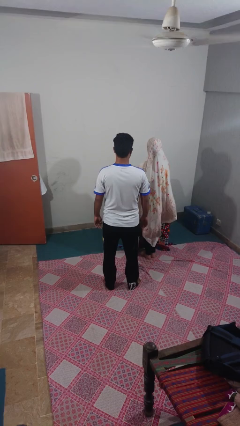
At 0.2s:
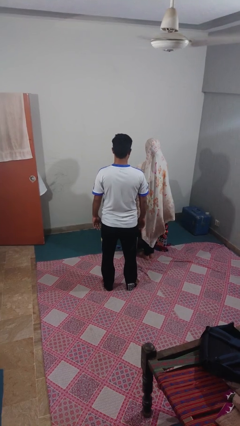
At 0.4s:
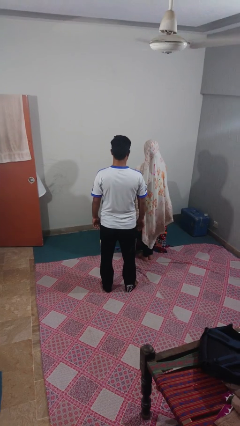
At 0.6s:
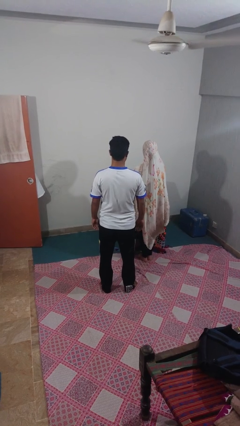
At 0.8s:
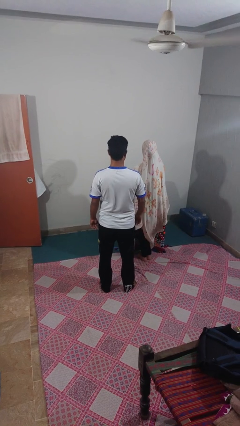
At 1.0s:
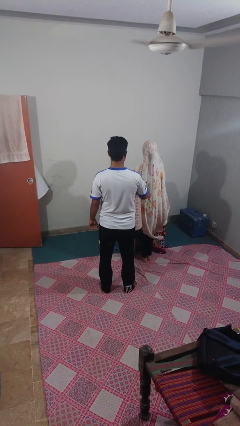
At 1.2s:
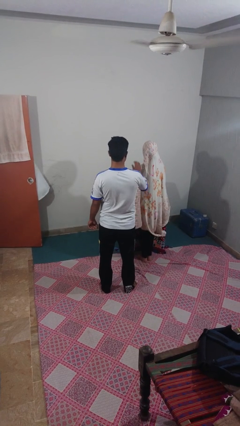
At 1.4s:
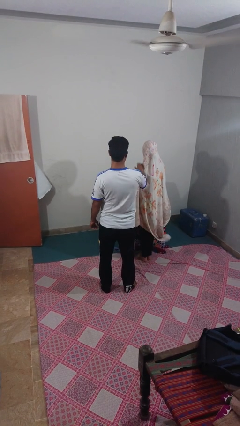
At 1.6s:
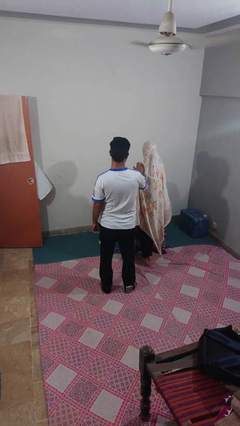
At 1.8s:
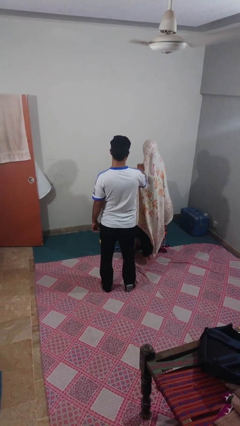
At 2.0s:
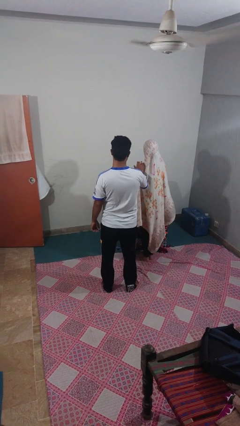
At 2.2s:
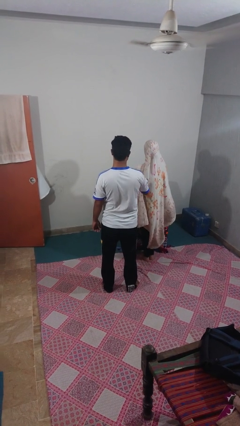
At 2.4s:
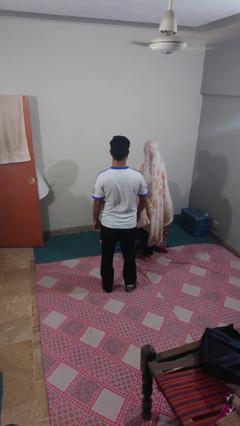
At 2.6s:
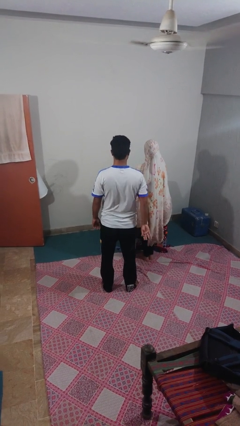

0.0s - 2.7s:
person touches back of person

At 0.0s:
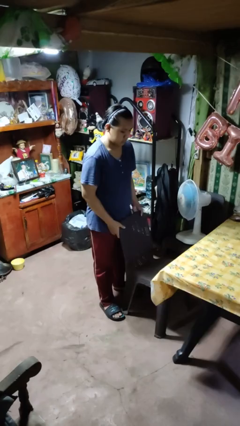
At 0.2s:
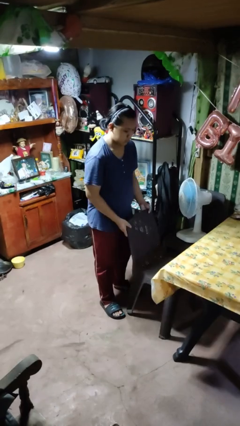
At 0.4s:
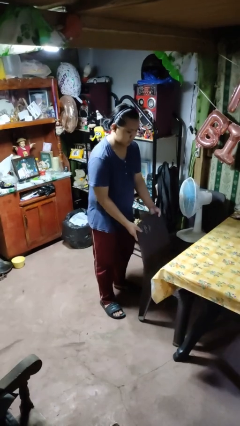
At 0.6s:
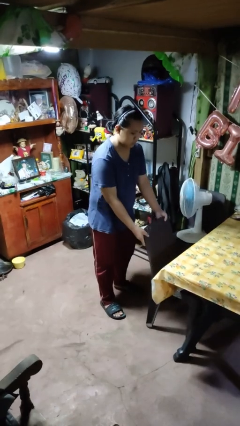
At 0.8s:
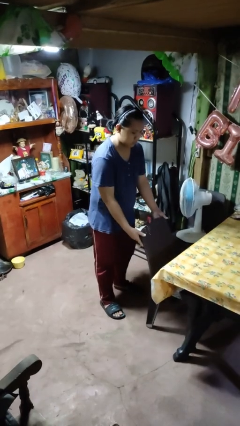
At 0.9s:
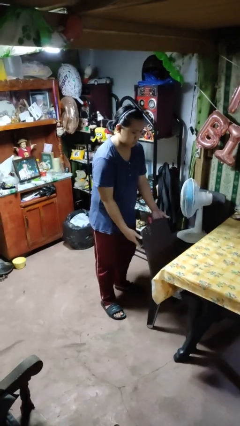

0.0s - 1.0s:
person pushes in chair

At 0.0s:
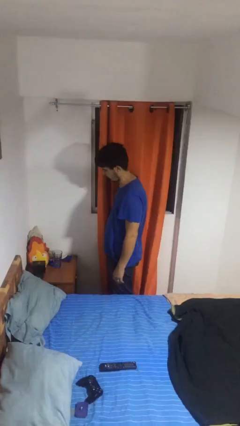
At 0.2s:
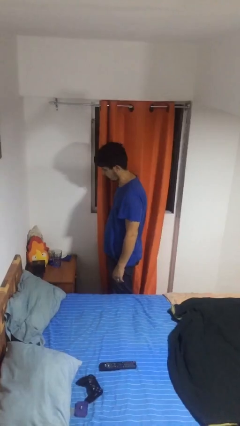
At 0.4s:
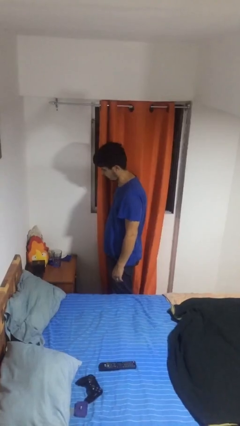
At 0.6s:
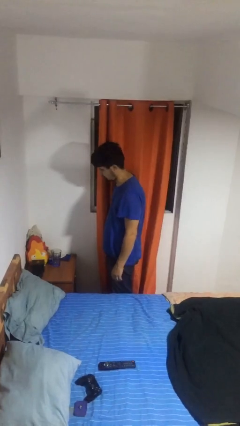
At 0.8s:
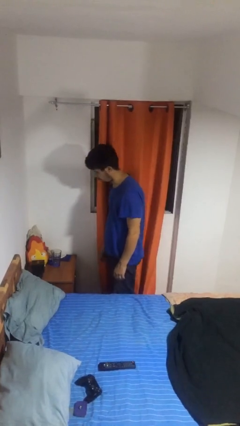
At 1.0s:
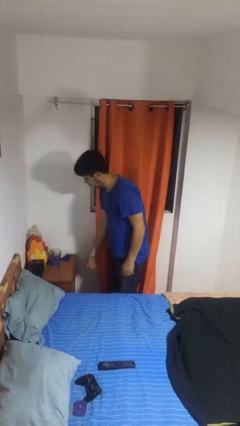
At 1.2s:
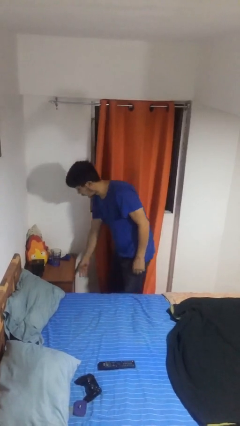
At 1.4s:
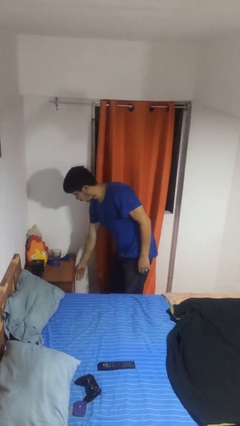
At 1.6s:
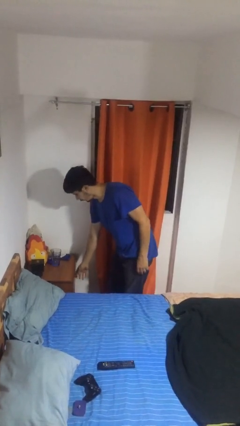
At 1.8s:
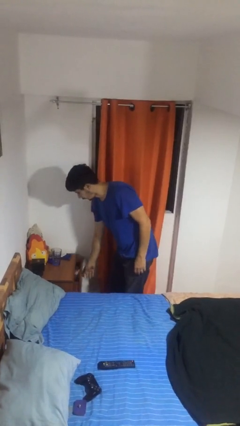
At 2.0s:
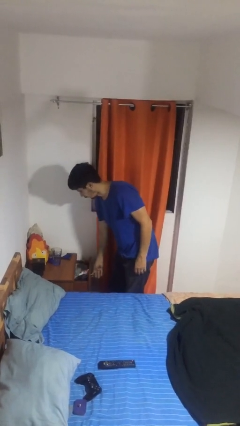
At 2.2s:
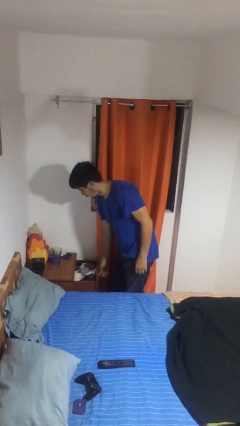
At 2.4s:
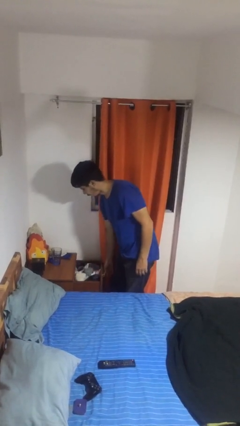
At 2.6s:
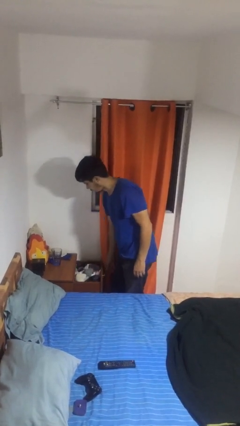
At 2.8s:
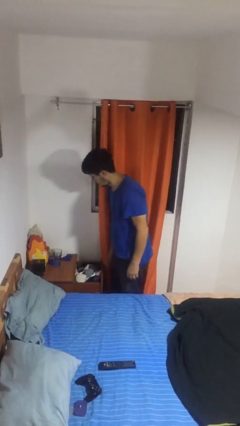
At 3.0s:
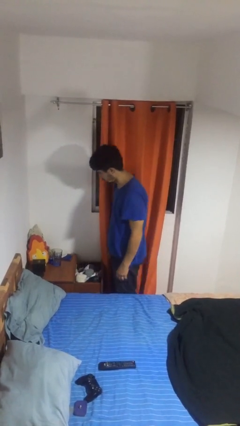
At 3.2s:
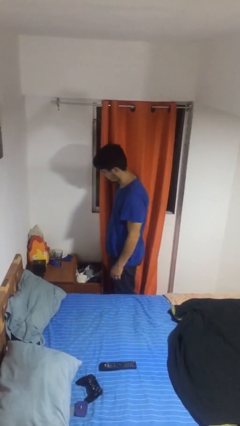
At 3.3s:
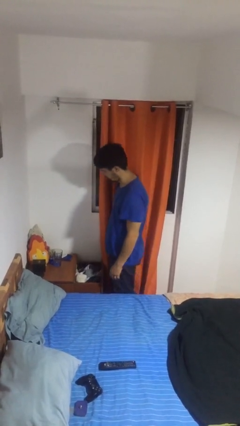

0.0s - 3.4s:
person opens dresser drawer

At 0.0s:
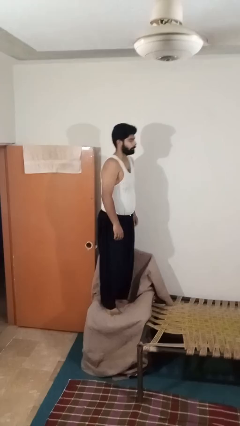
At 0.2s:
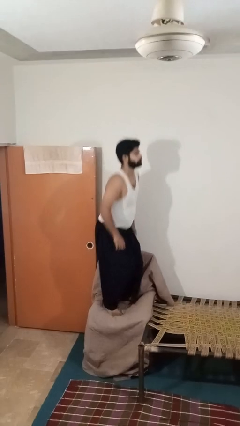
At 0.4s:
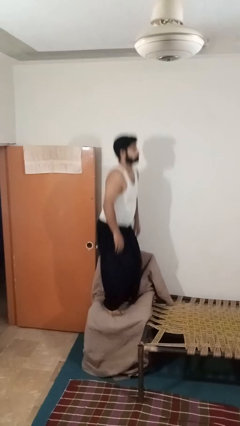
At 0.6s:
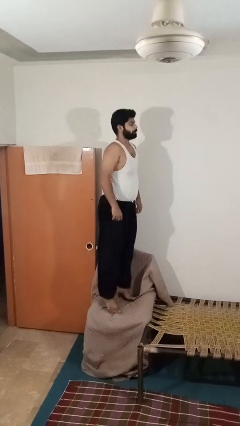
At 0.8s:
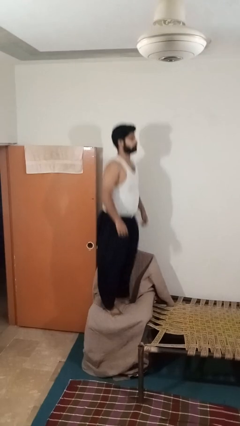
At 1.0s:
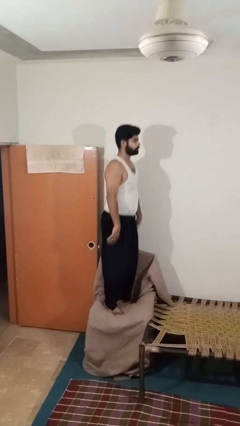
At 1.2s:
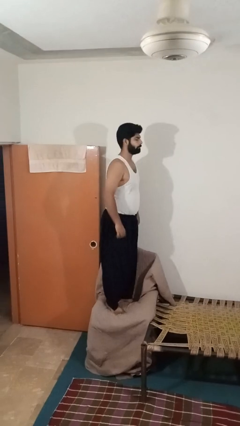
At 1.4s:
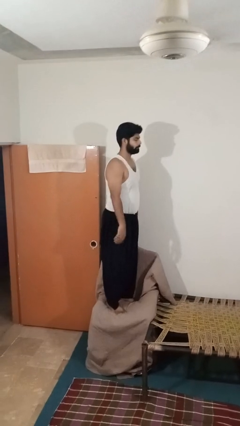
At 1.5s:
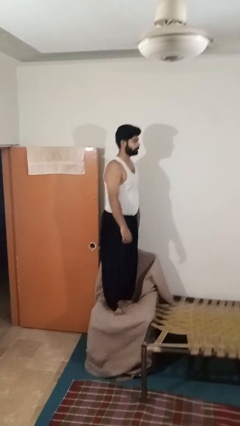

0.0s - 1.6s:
person jumps on couch

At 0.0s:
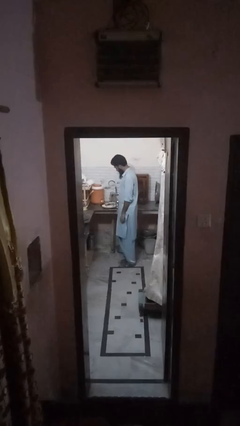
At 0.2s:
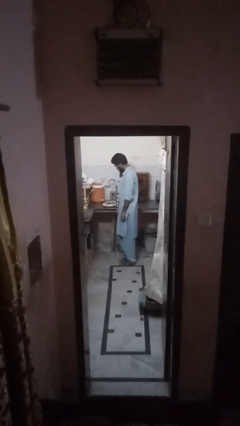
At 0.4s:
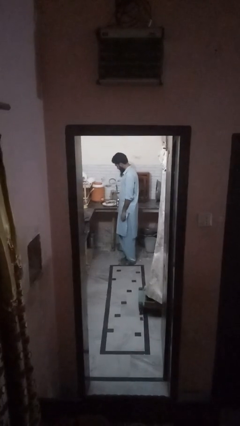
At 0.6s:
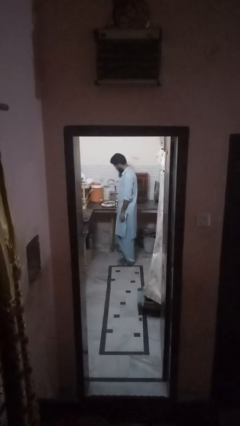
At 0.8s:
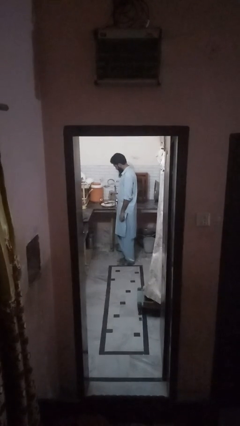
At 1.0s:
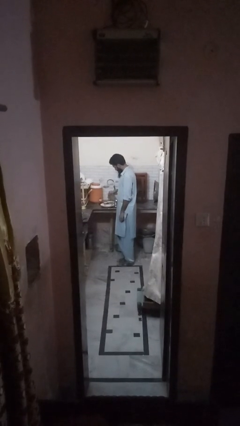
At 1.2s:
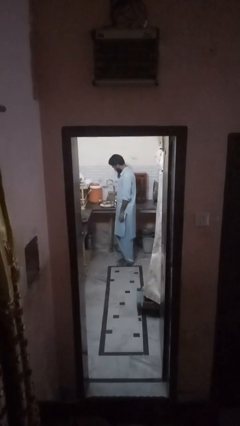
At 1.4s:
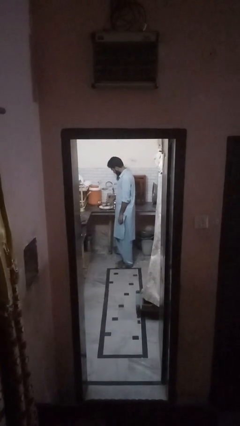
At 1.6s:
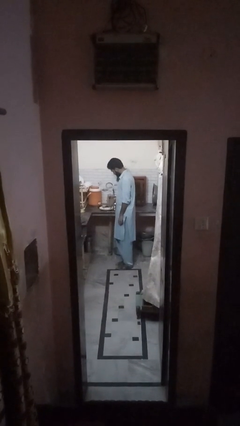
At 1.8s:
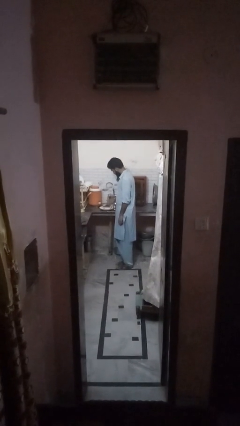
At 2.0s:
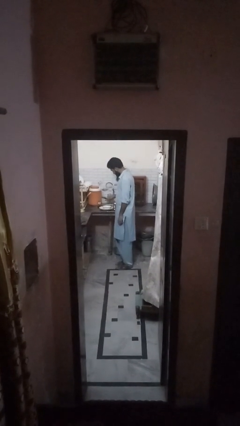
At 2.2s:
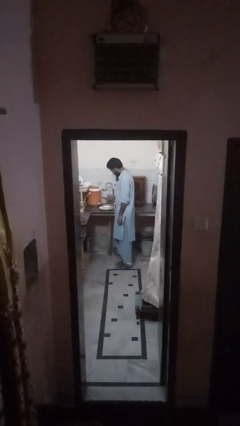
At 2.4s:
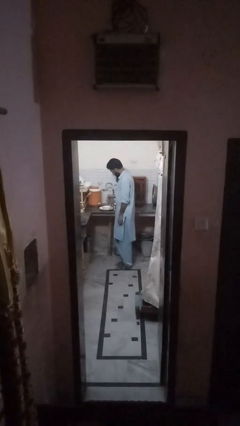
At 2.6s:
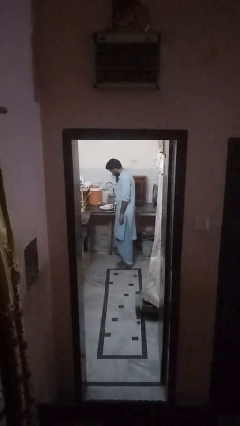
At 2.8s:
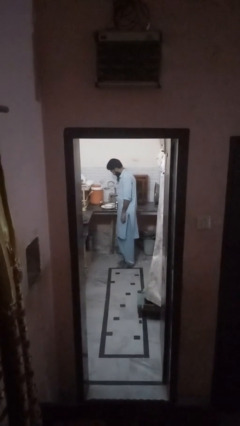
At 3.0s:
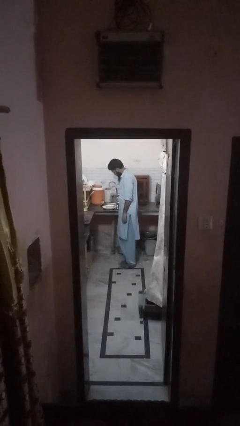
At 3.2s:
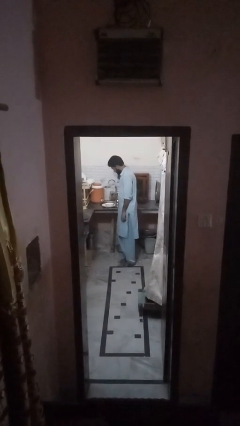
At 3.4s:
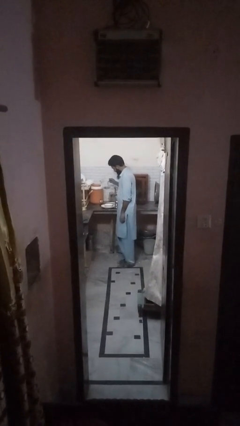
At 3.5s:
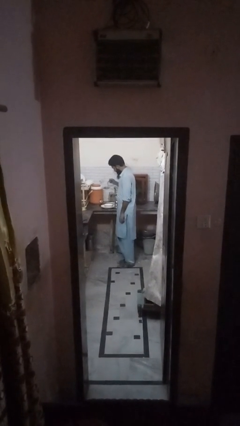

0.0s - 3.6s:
person loads dishwasher

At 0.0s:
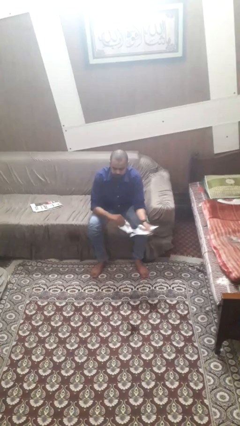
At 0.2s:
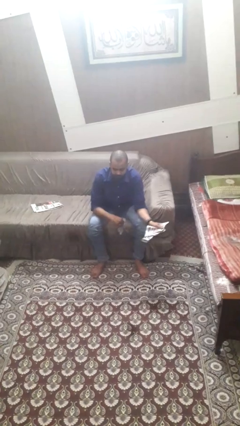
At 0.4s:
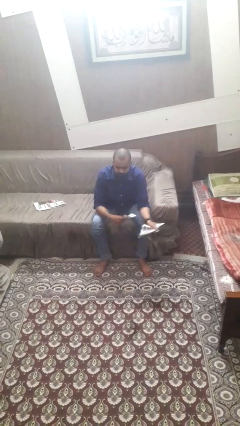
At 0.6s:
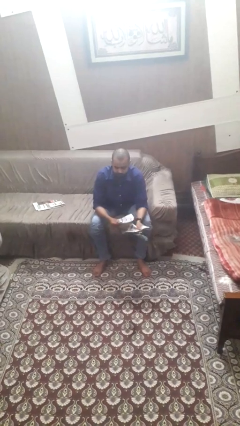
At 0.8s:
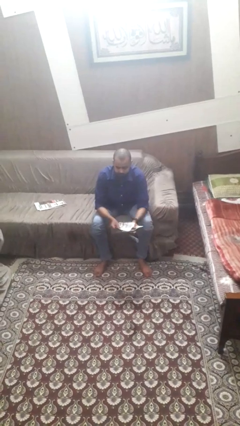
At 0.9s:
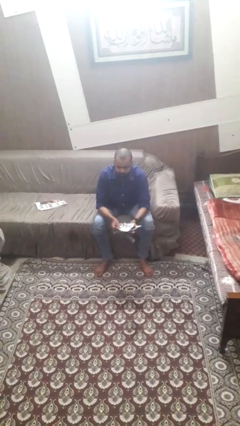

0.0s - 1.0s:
person tears paper

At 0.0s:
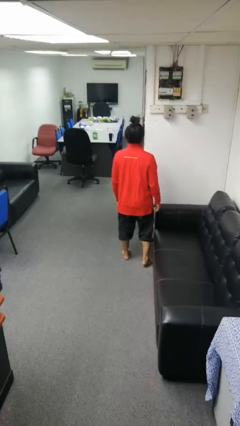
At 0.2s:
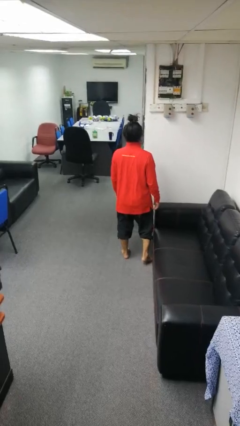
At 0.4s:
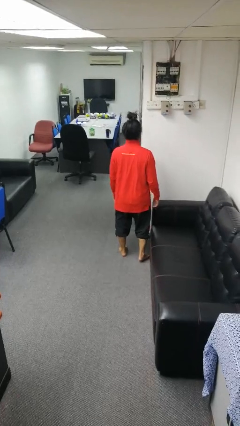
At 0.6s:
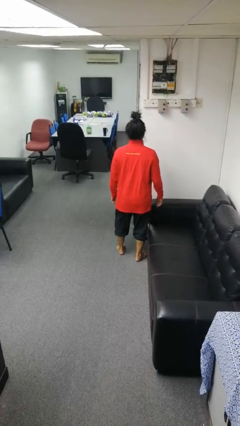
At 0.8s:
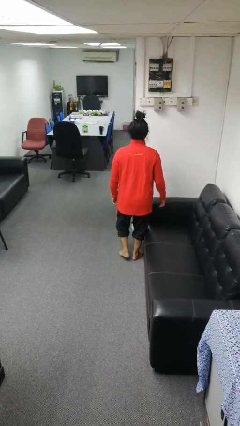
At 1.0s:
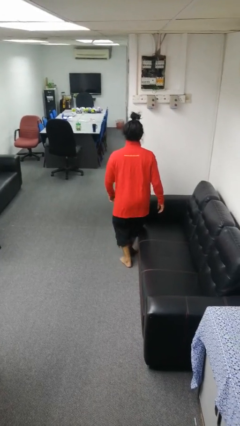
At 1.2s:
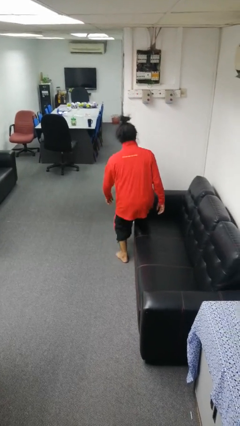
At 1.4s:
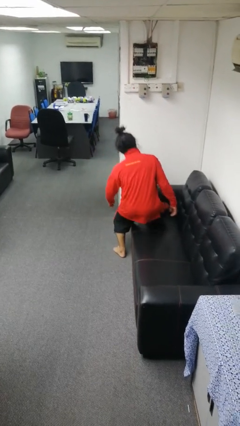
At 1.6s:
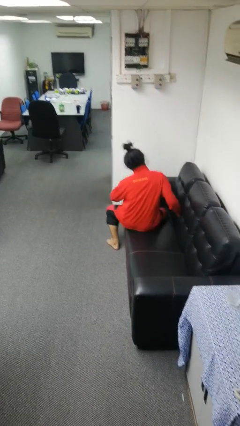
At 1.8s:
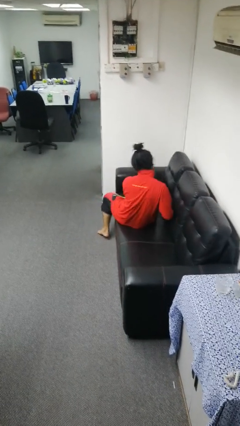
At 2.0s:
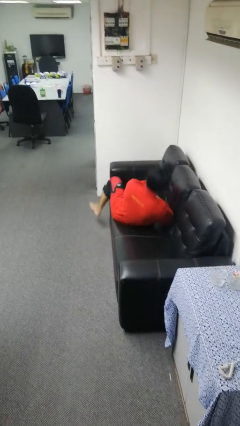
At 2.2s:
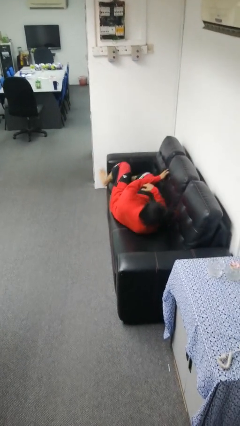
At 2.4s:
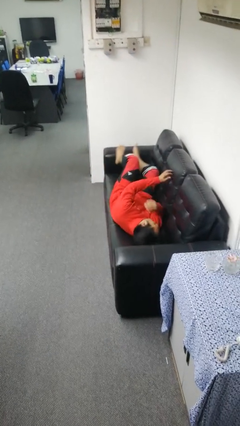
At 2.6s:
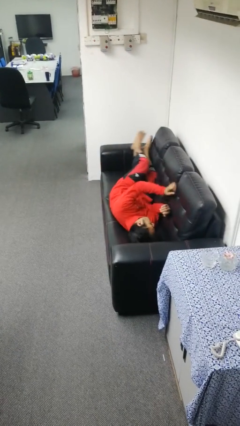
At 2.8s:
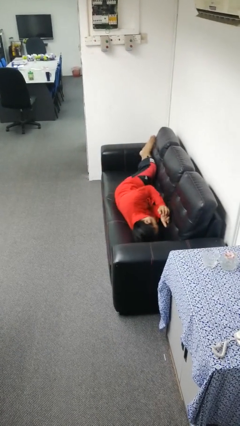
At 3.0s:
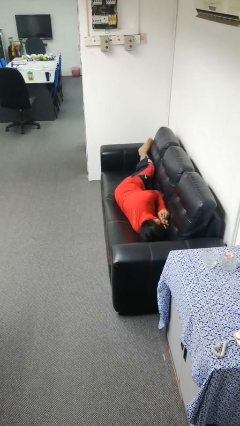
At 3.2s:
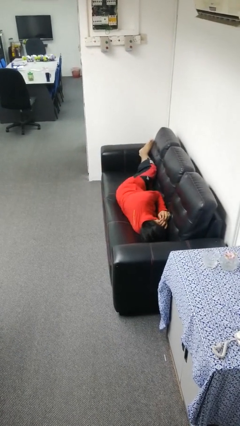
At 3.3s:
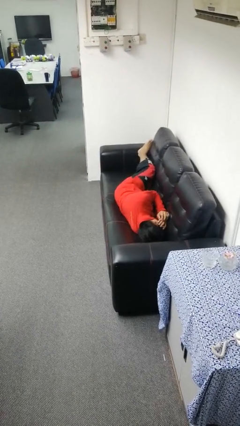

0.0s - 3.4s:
person lies down on couch
